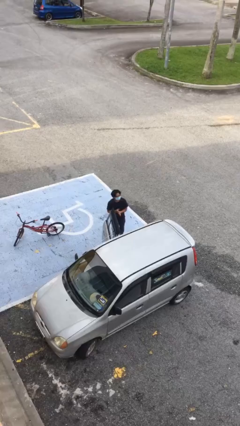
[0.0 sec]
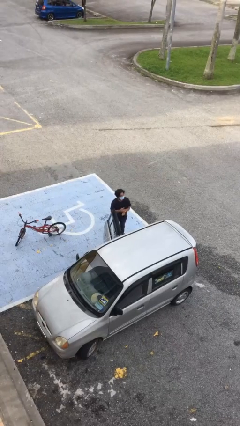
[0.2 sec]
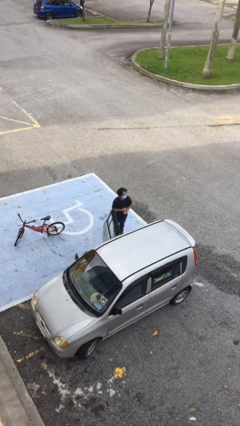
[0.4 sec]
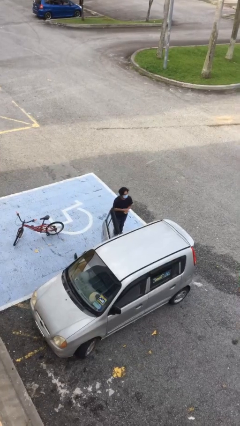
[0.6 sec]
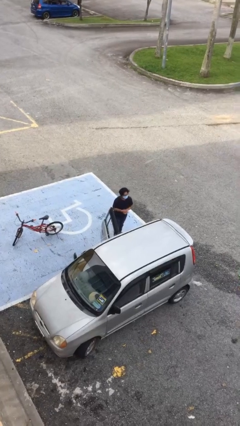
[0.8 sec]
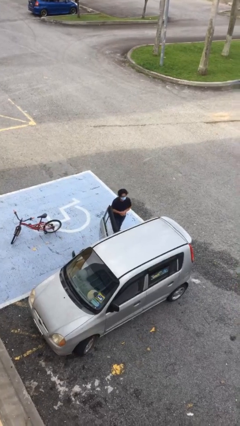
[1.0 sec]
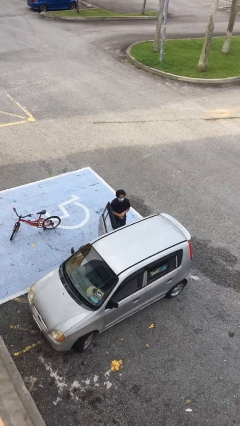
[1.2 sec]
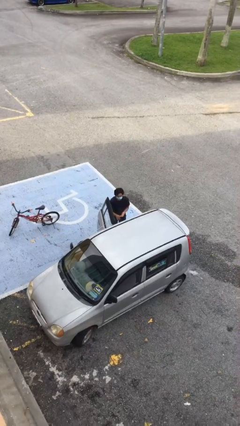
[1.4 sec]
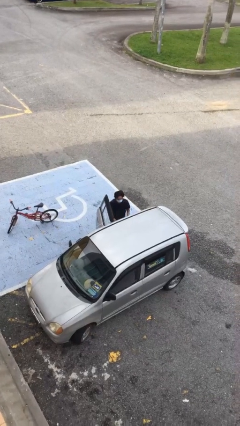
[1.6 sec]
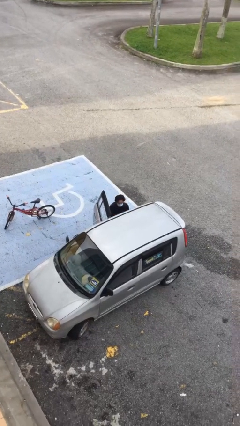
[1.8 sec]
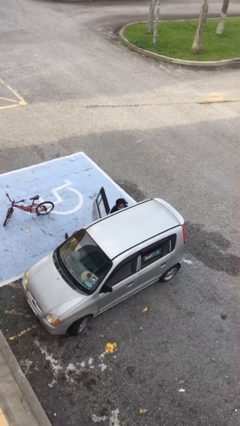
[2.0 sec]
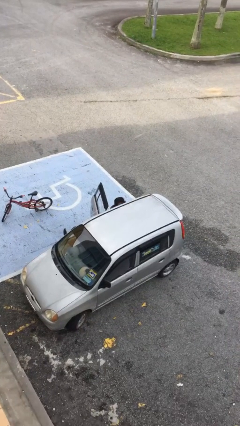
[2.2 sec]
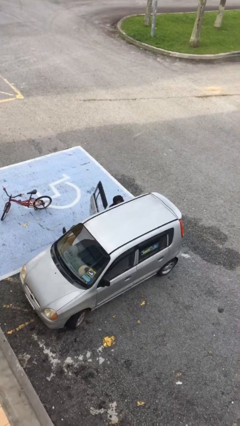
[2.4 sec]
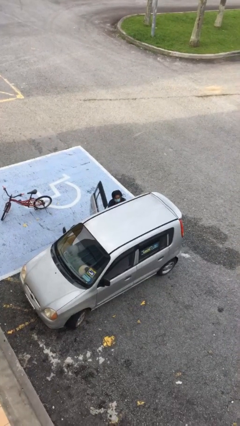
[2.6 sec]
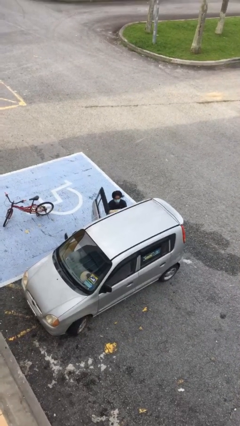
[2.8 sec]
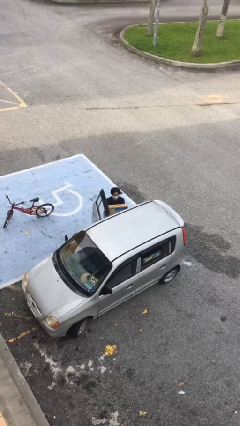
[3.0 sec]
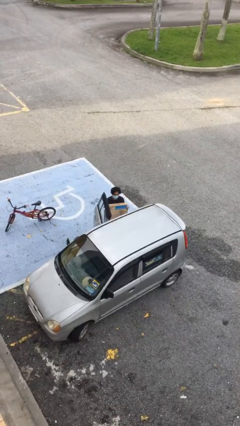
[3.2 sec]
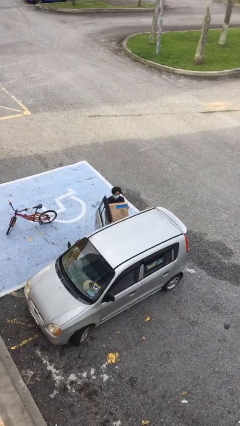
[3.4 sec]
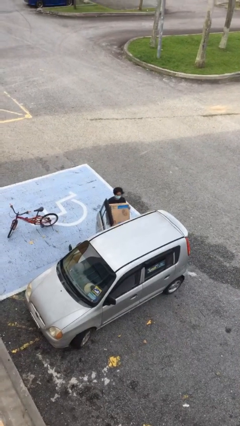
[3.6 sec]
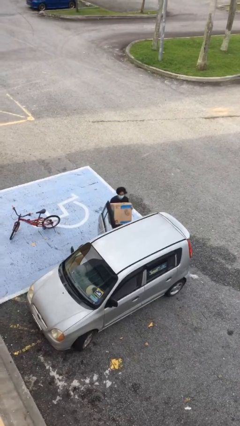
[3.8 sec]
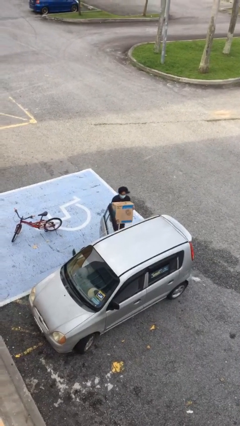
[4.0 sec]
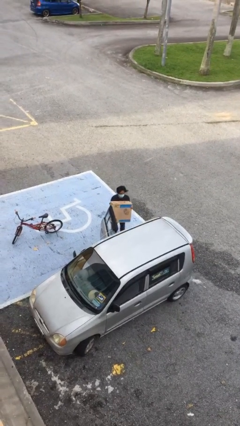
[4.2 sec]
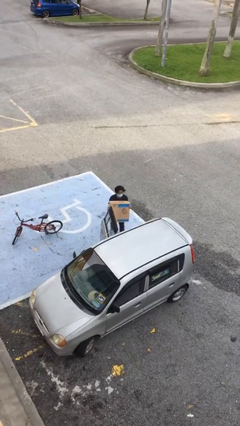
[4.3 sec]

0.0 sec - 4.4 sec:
person unloads car

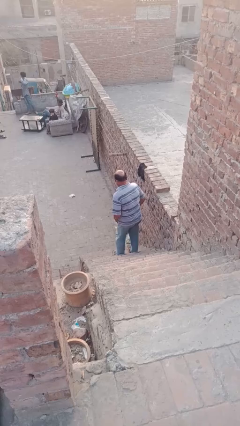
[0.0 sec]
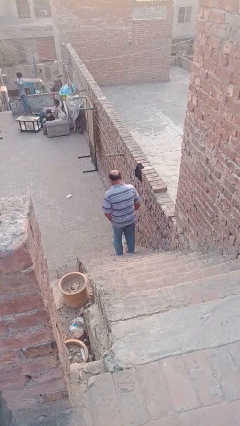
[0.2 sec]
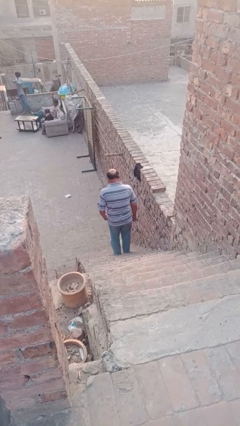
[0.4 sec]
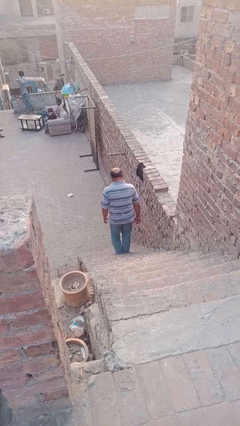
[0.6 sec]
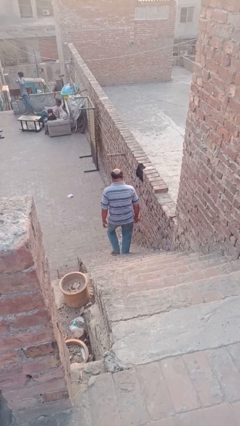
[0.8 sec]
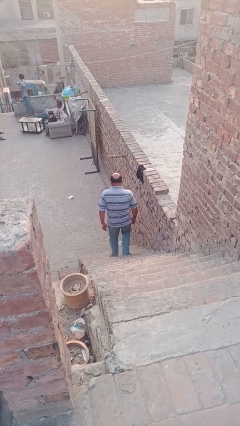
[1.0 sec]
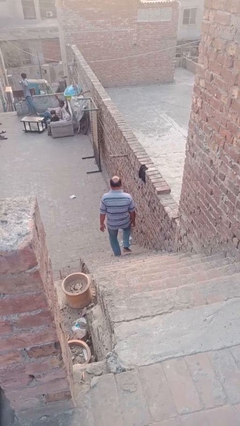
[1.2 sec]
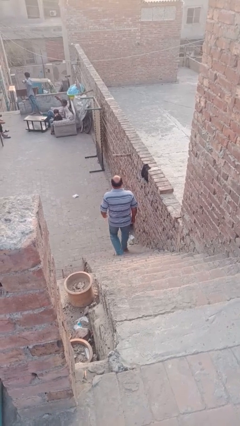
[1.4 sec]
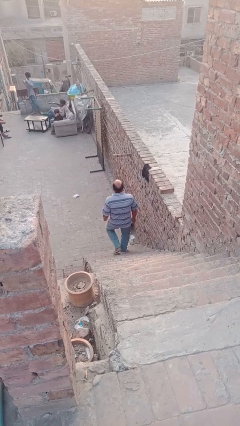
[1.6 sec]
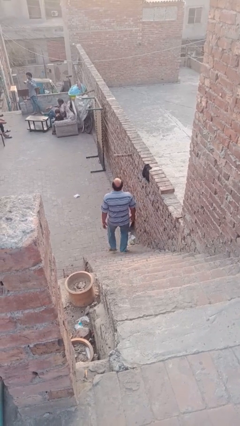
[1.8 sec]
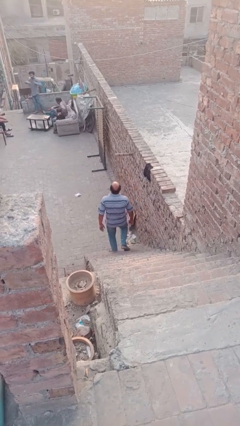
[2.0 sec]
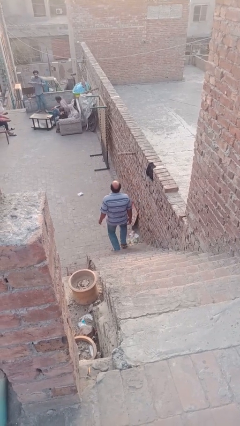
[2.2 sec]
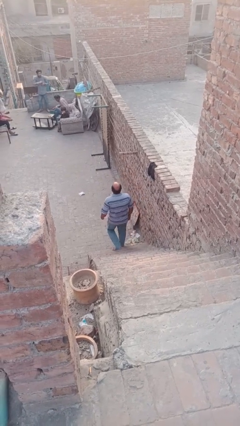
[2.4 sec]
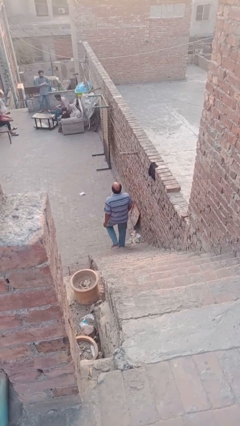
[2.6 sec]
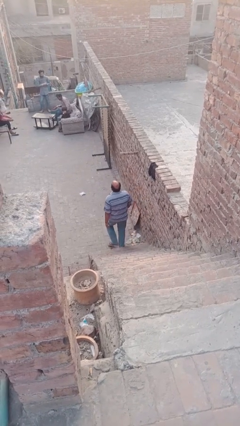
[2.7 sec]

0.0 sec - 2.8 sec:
person climbs down stairs

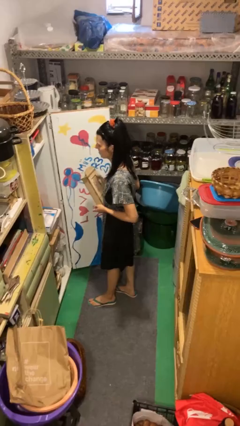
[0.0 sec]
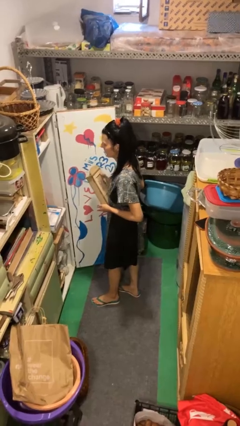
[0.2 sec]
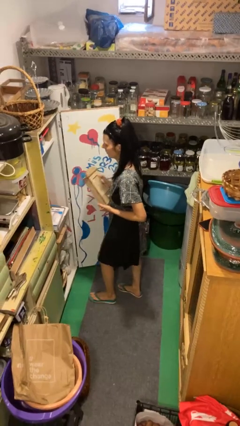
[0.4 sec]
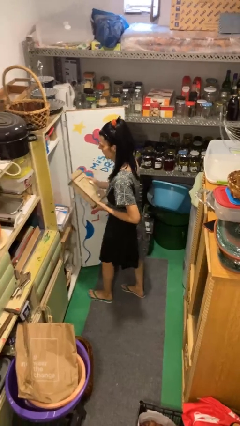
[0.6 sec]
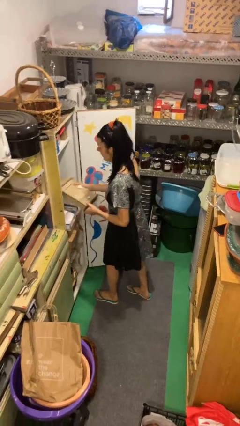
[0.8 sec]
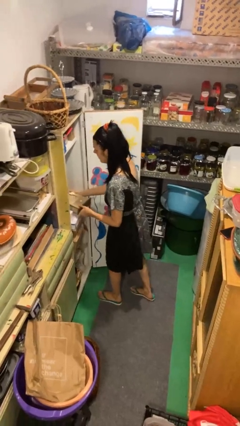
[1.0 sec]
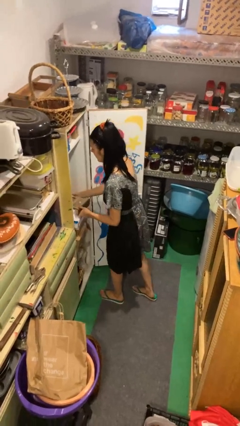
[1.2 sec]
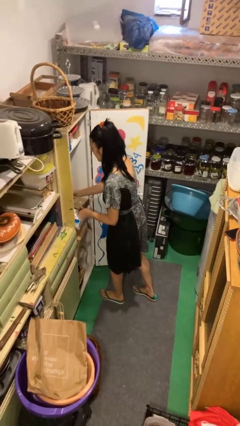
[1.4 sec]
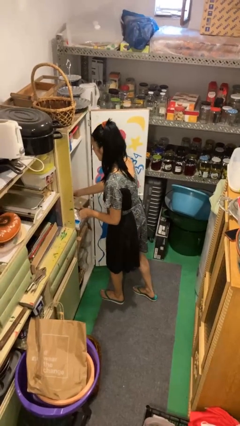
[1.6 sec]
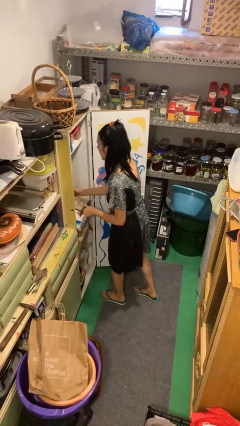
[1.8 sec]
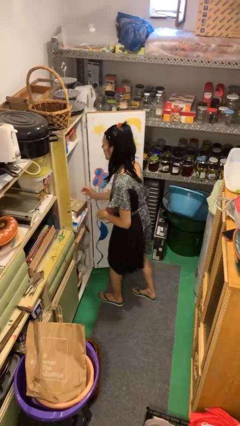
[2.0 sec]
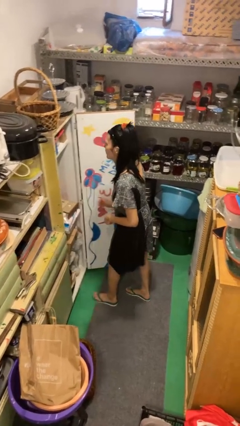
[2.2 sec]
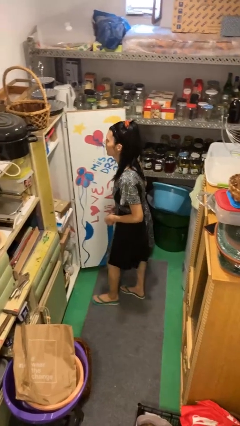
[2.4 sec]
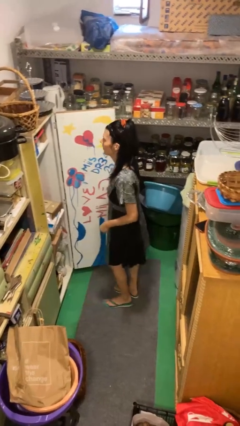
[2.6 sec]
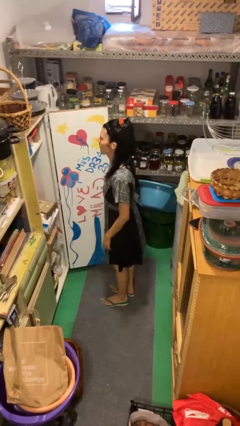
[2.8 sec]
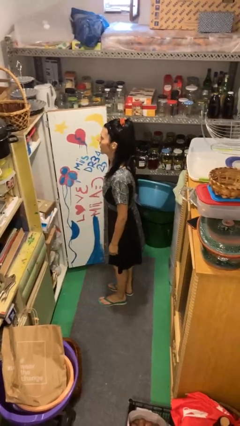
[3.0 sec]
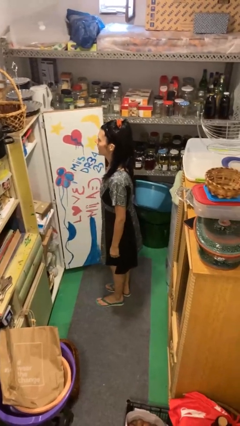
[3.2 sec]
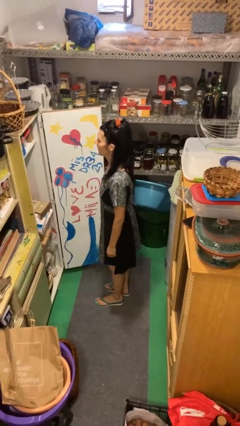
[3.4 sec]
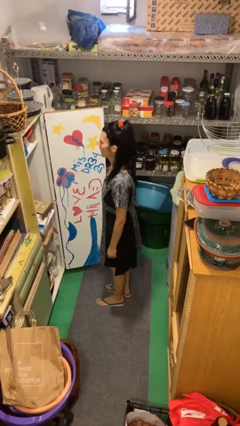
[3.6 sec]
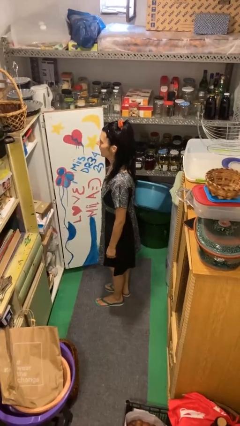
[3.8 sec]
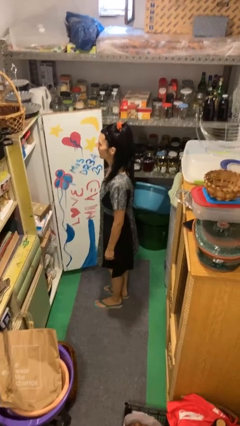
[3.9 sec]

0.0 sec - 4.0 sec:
person puts down object into cabinet

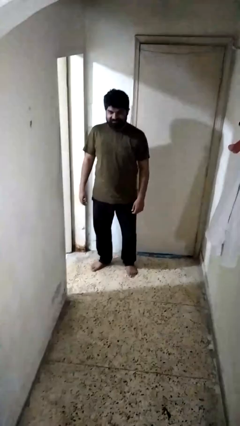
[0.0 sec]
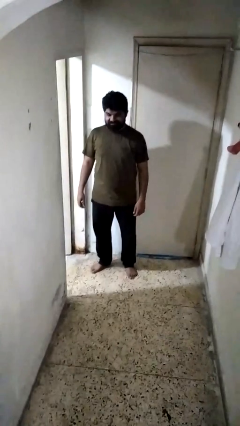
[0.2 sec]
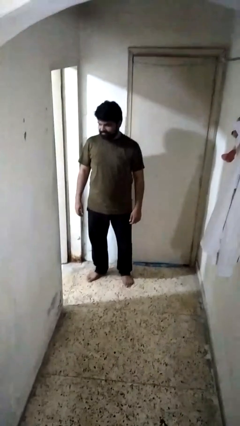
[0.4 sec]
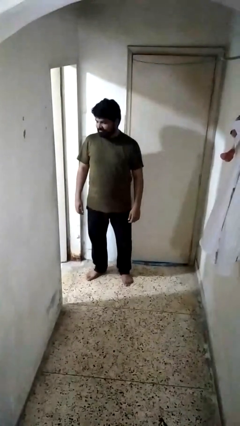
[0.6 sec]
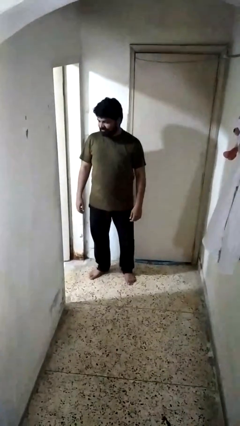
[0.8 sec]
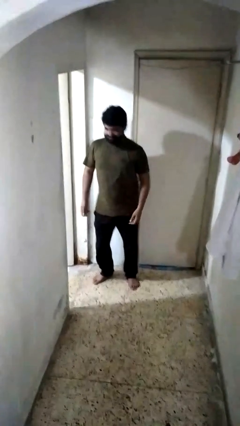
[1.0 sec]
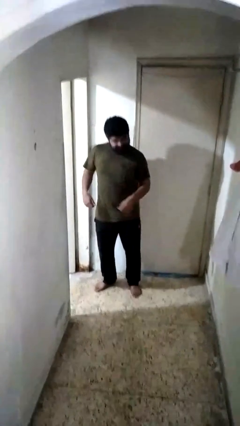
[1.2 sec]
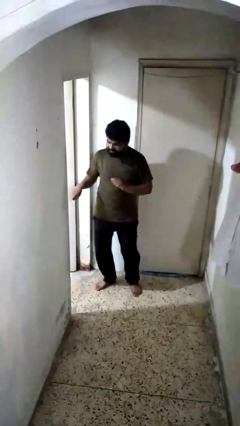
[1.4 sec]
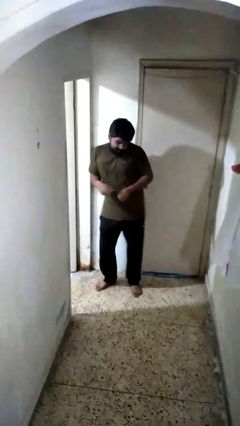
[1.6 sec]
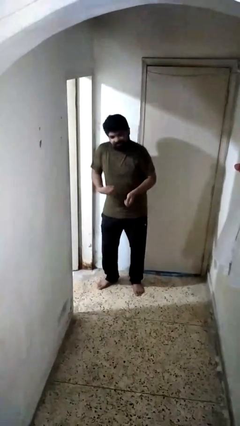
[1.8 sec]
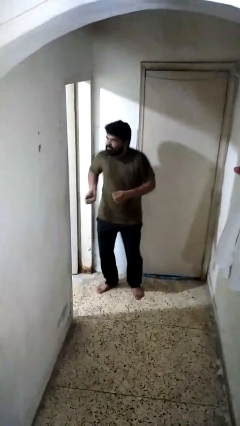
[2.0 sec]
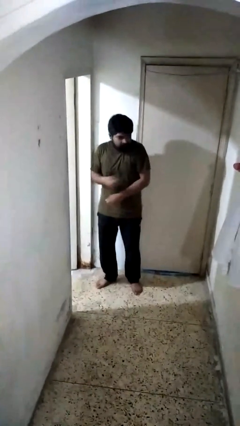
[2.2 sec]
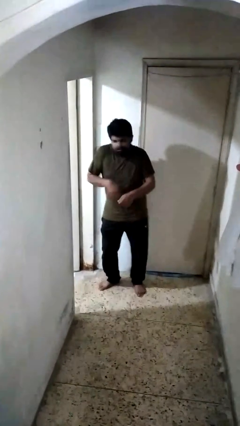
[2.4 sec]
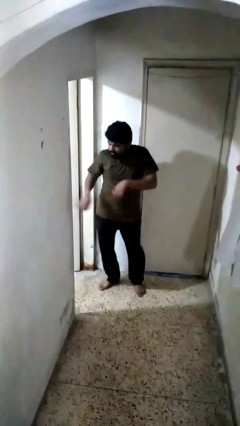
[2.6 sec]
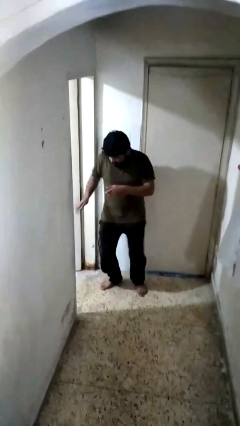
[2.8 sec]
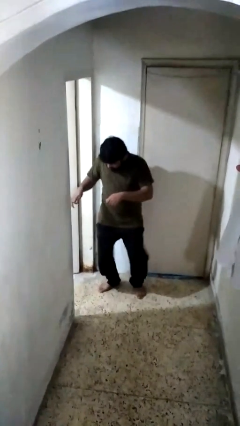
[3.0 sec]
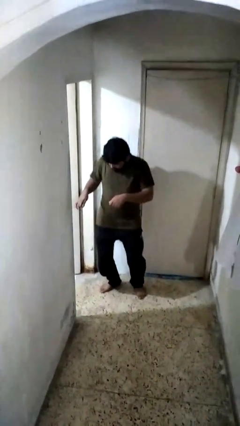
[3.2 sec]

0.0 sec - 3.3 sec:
person dances in place

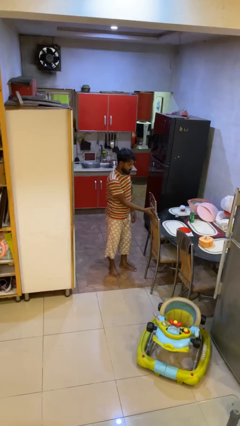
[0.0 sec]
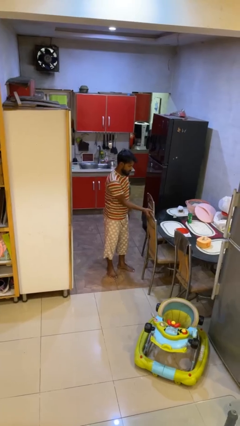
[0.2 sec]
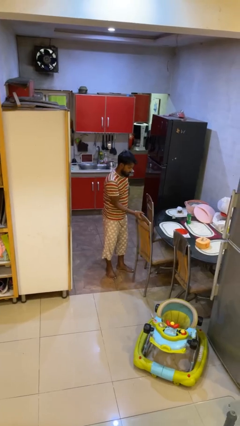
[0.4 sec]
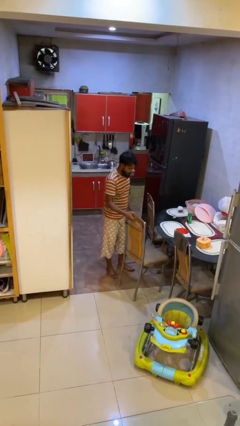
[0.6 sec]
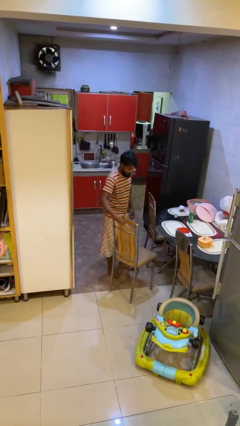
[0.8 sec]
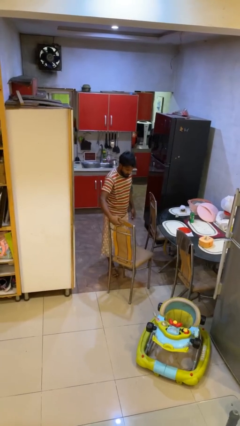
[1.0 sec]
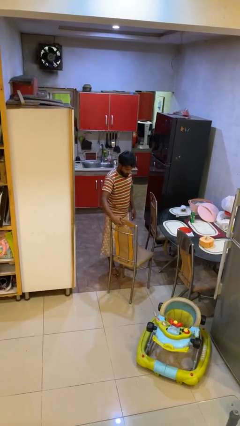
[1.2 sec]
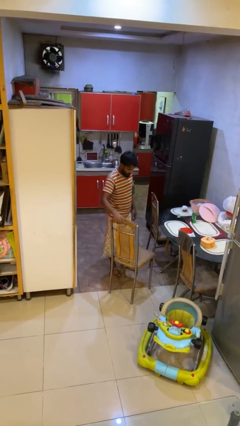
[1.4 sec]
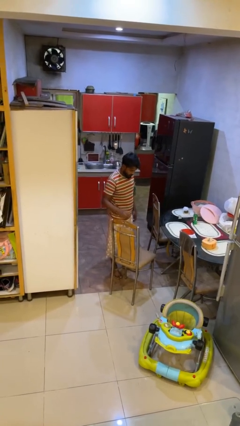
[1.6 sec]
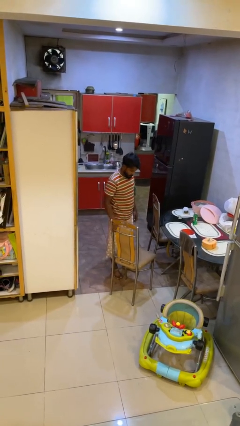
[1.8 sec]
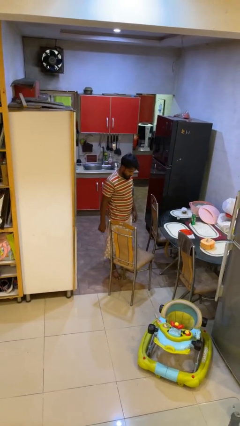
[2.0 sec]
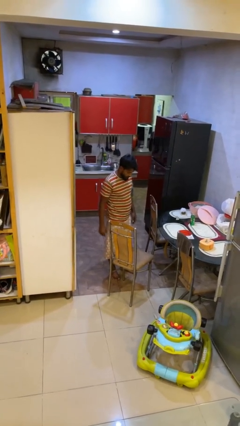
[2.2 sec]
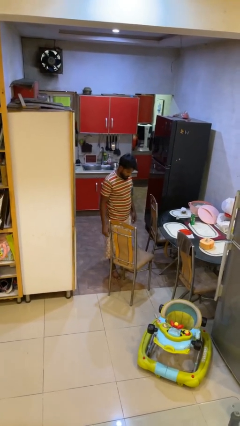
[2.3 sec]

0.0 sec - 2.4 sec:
person pulls out chair

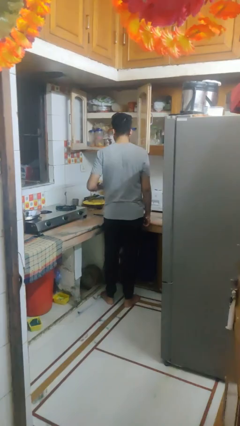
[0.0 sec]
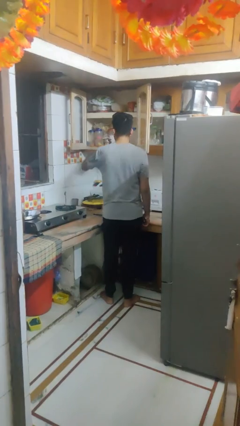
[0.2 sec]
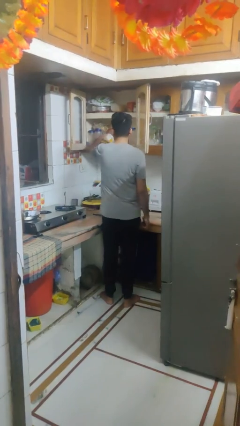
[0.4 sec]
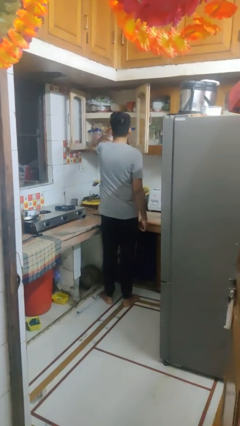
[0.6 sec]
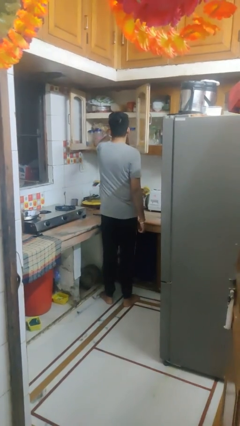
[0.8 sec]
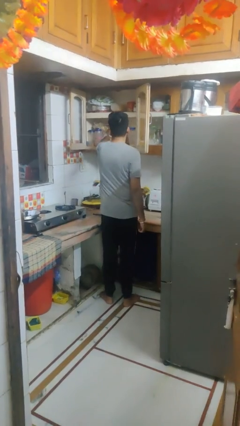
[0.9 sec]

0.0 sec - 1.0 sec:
person puts object in cabinet
